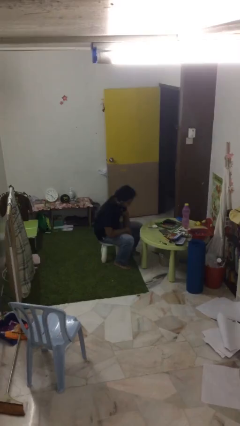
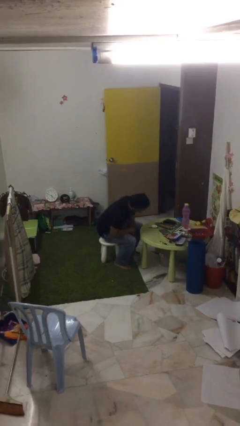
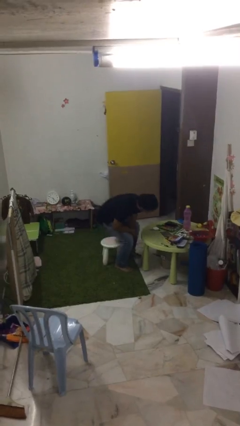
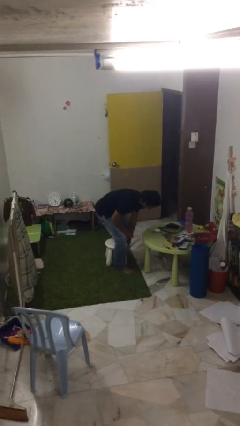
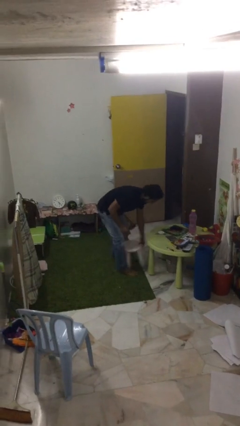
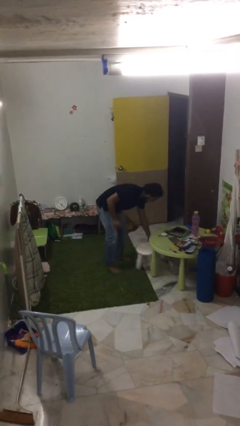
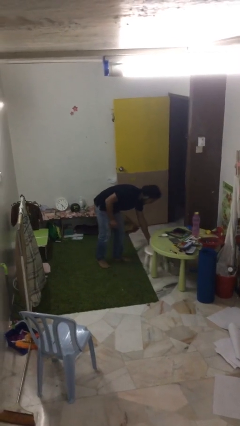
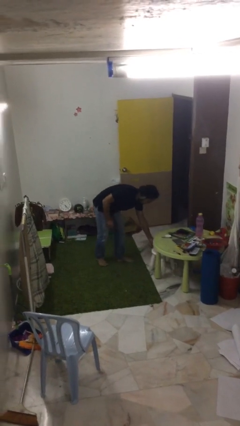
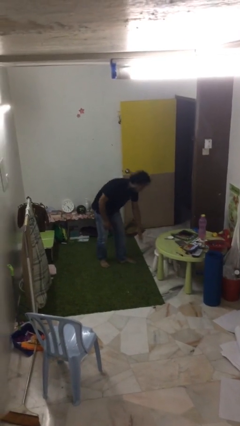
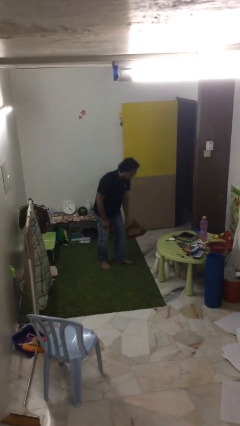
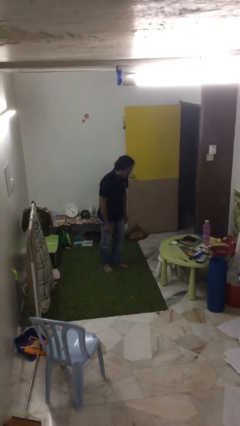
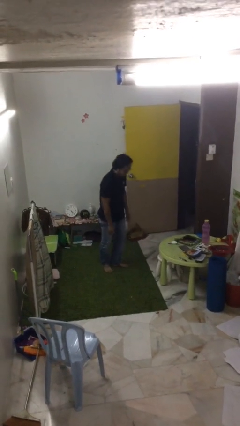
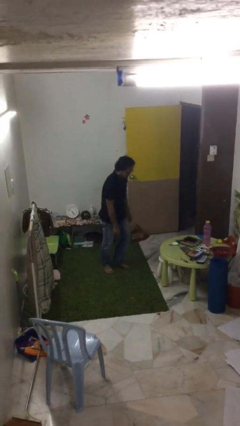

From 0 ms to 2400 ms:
person stands up

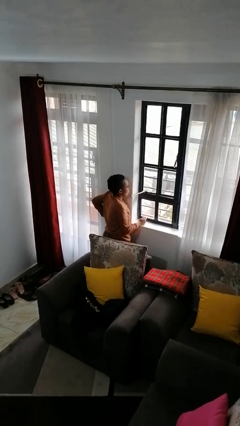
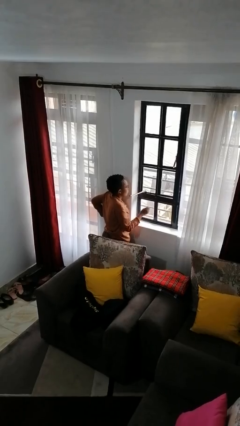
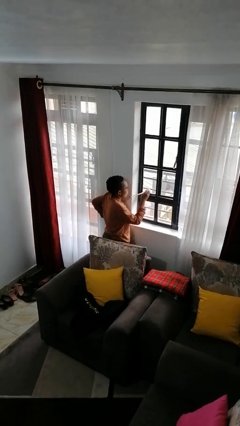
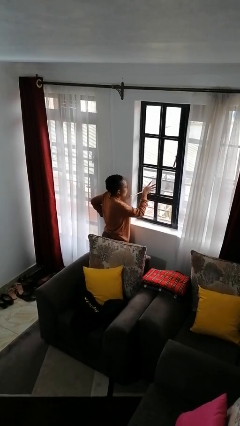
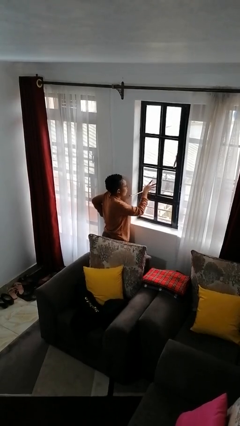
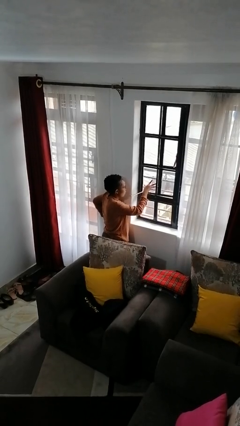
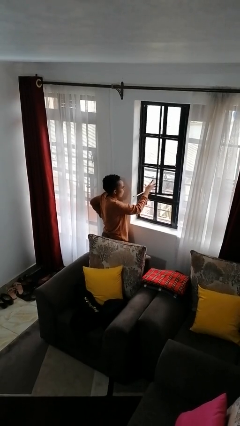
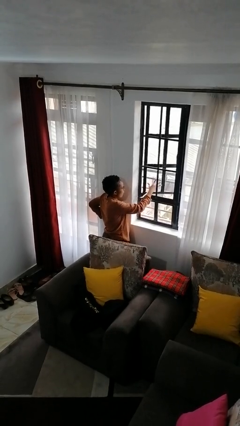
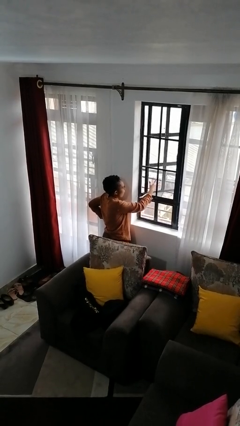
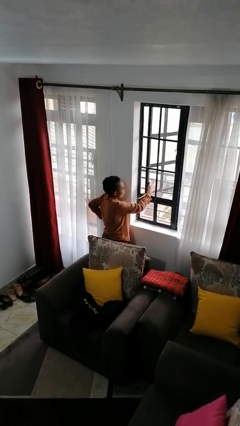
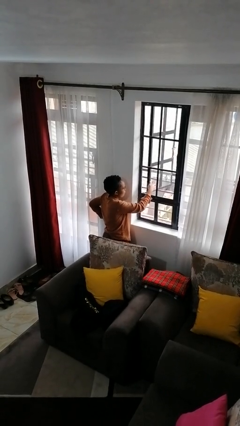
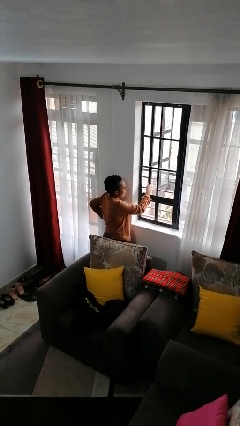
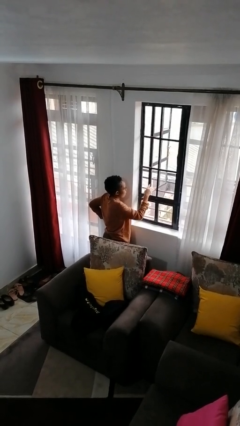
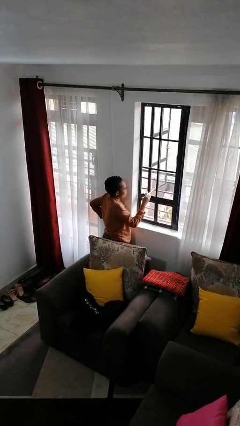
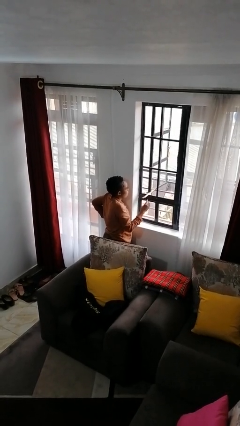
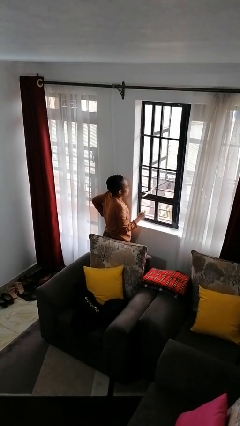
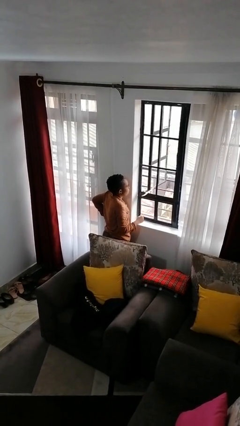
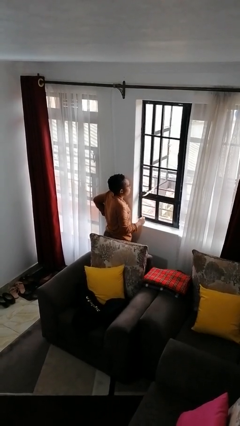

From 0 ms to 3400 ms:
person opens home window

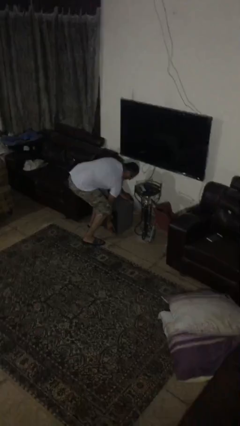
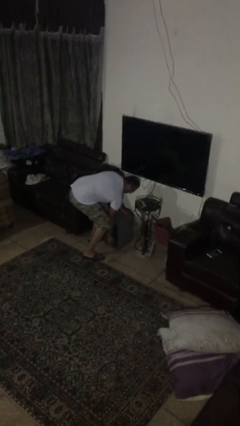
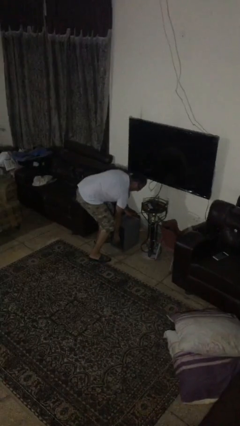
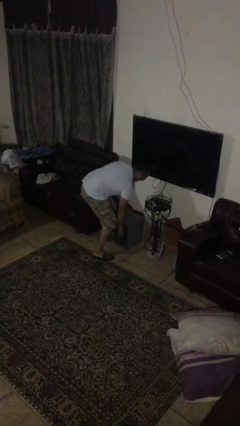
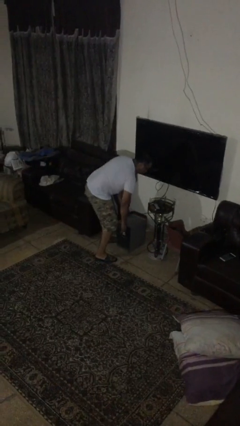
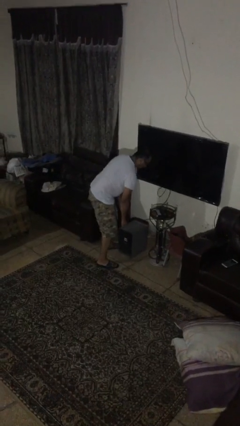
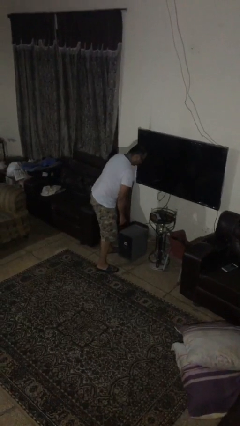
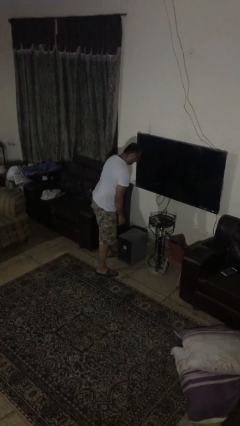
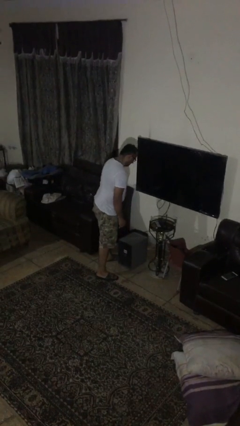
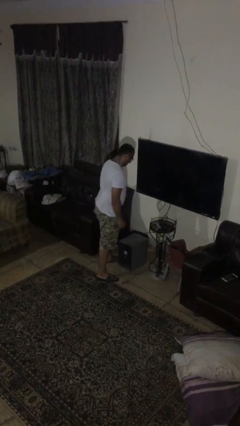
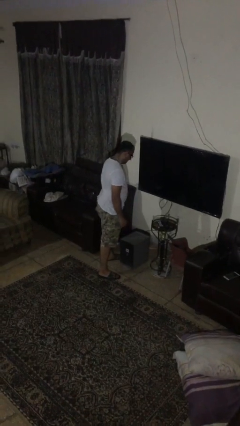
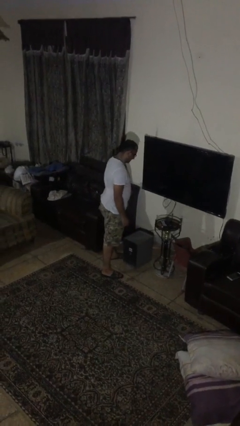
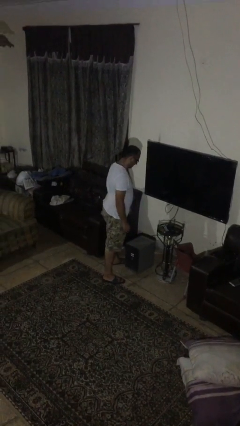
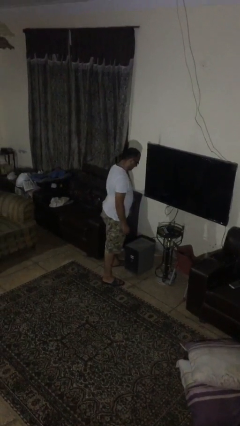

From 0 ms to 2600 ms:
person puts down object on floor

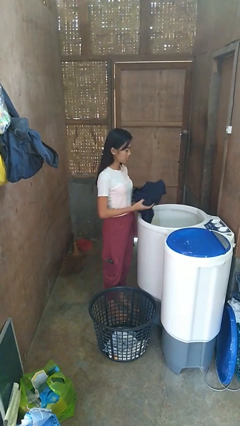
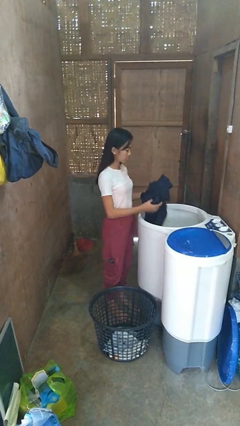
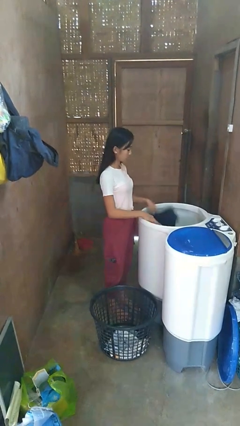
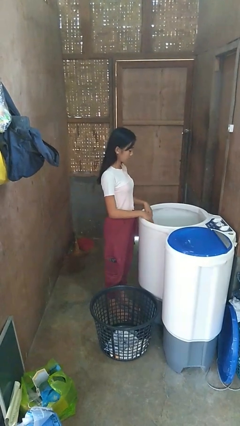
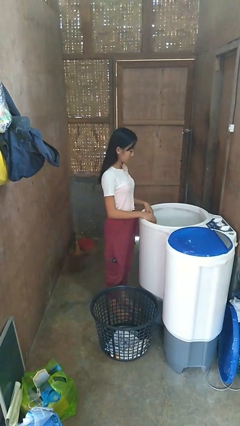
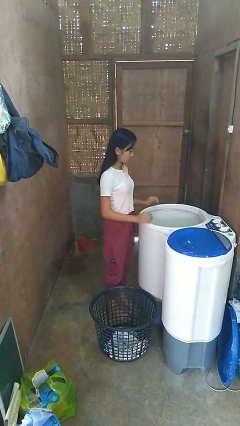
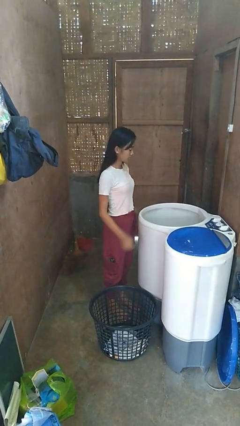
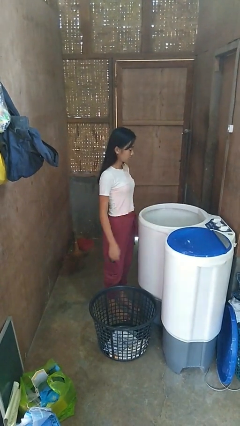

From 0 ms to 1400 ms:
person loads clotheswasher

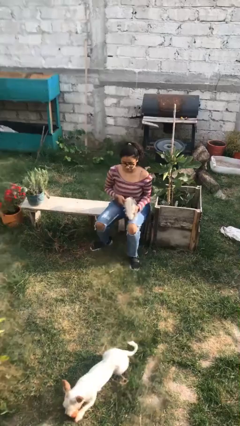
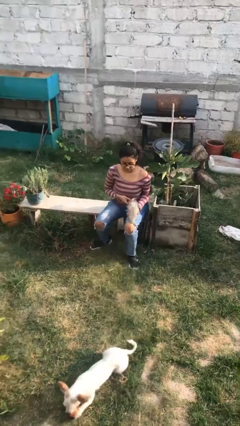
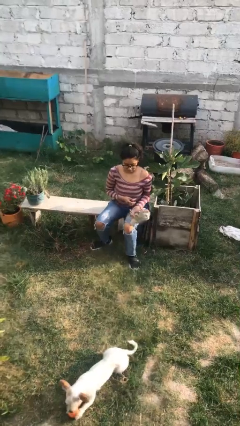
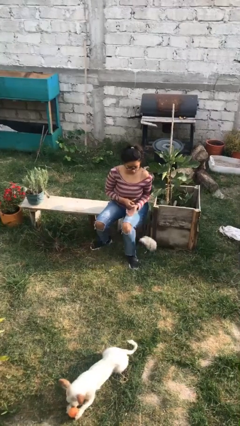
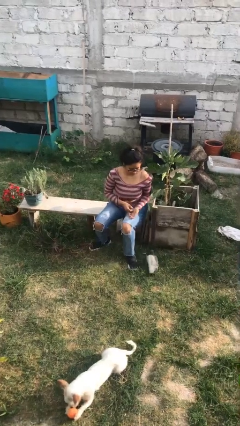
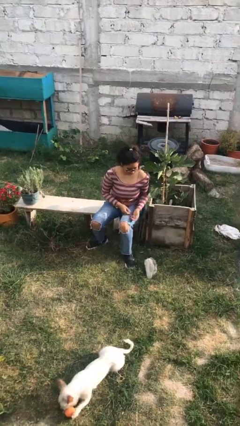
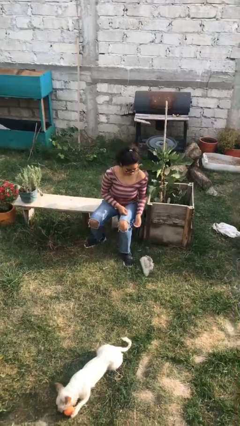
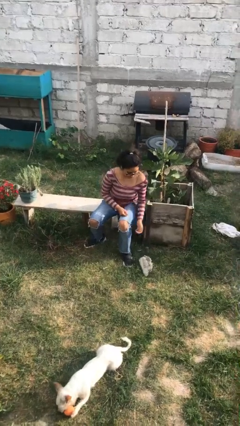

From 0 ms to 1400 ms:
person drops object

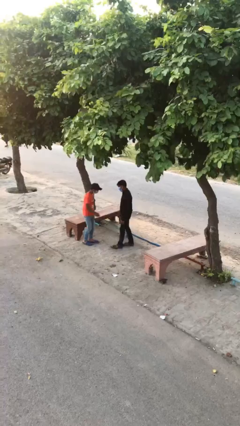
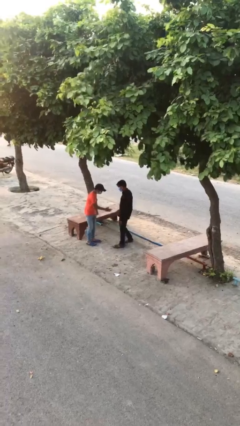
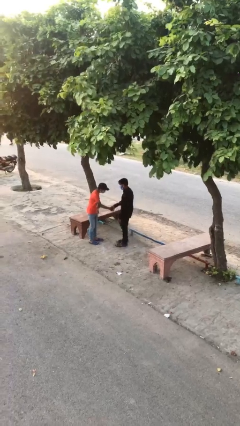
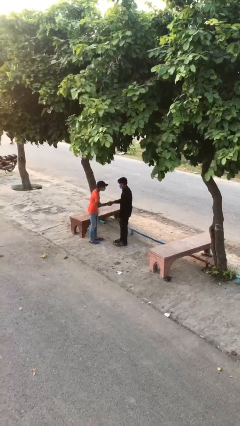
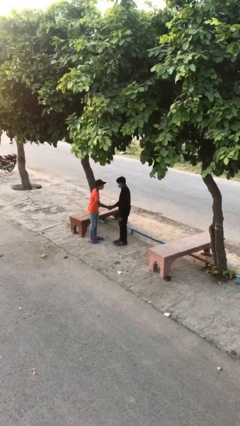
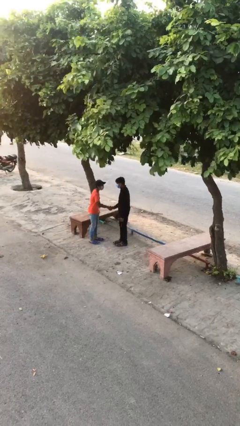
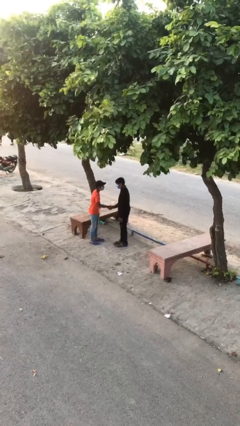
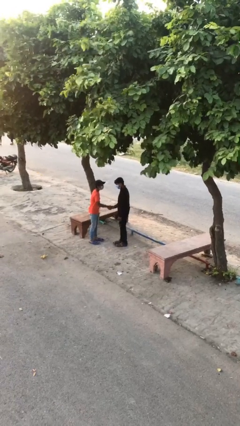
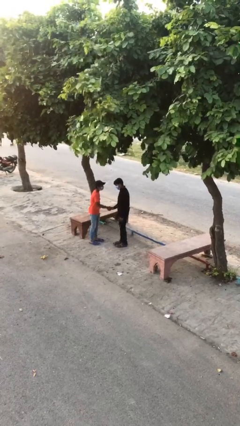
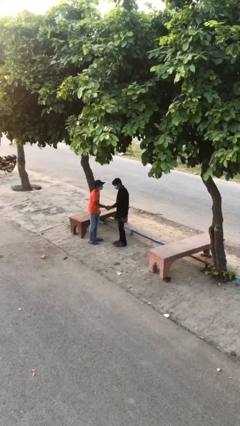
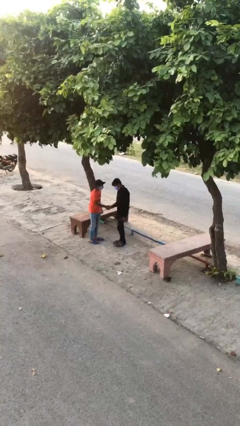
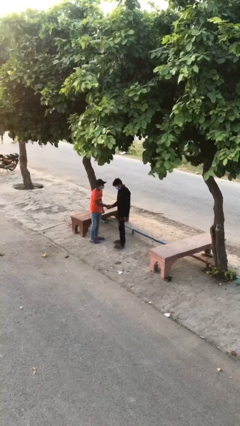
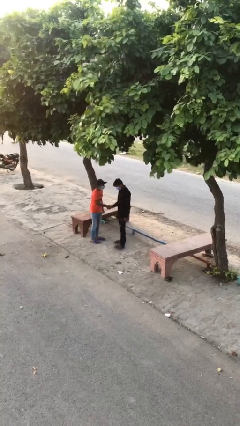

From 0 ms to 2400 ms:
person shakes hand

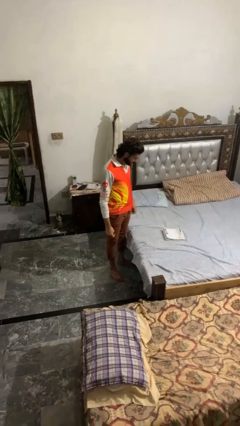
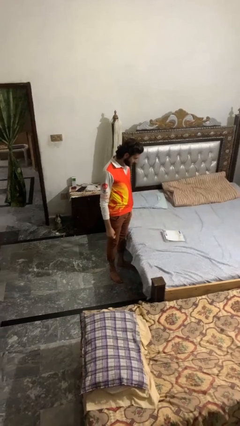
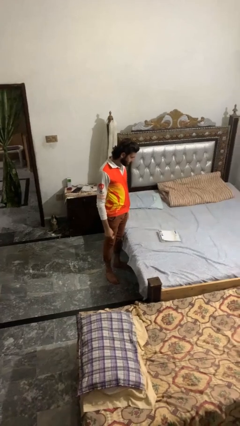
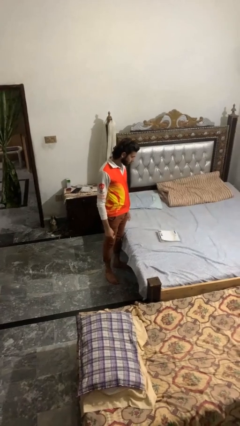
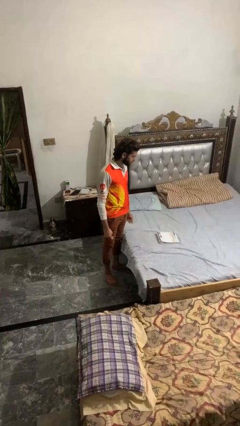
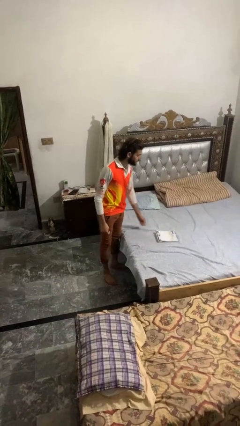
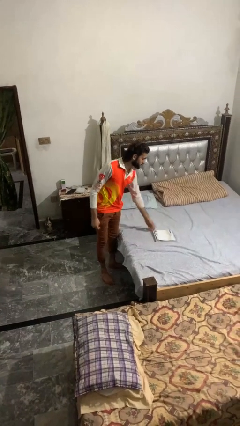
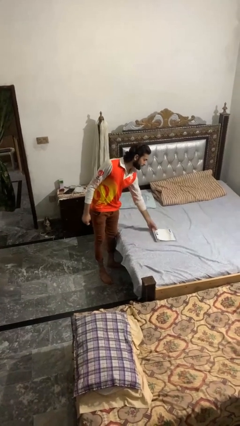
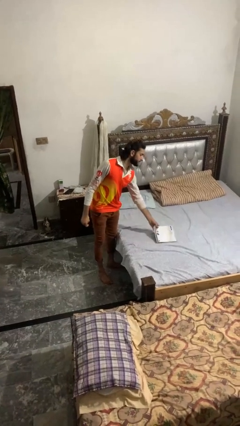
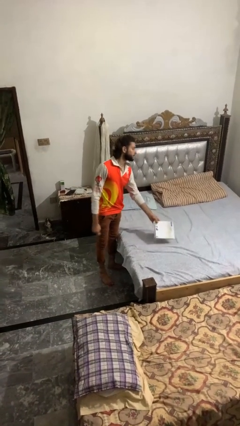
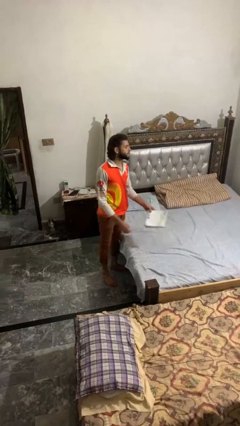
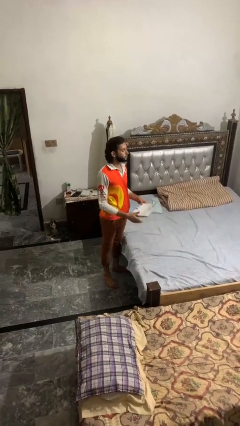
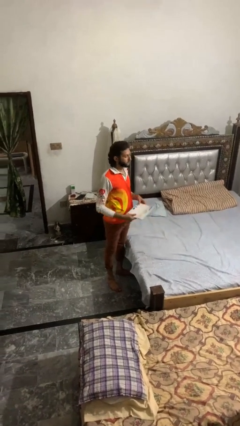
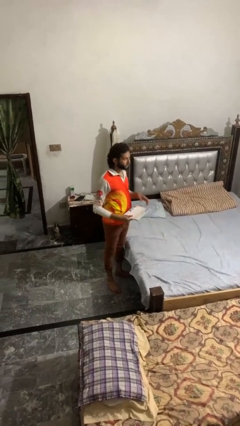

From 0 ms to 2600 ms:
person picks up object from bed

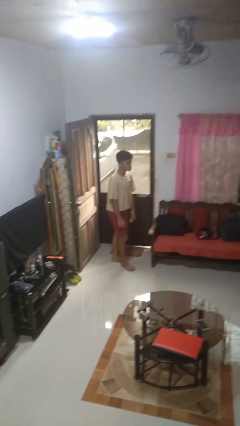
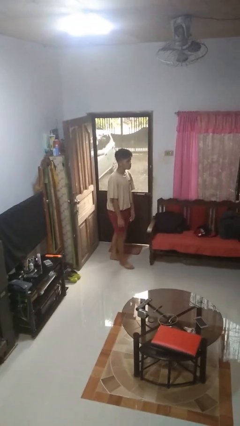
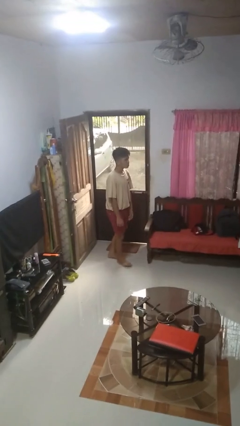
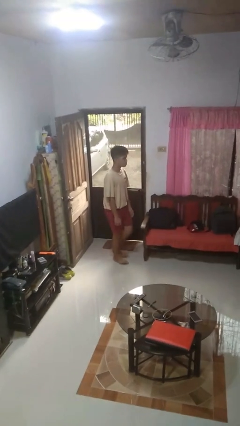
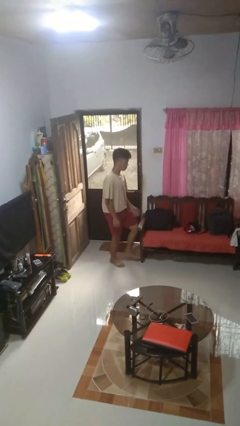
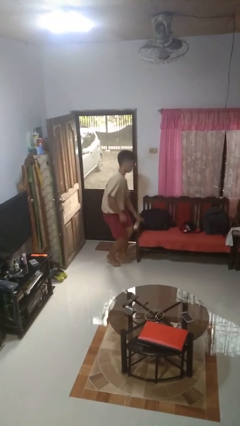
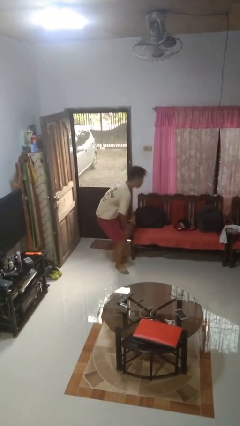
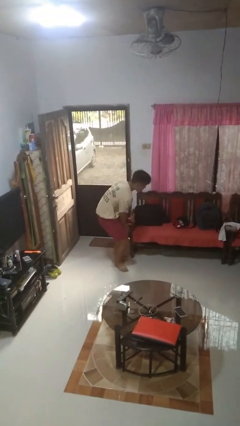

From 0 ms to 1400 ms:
person trips on object on floor
